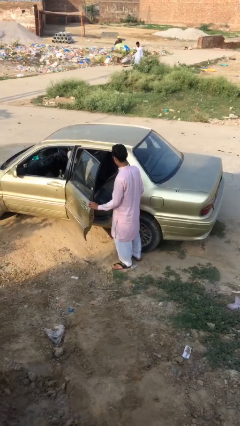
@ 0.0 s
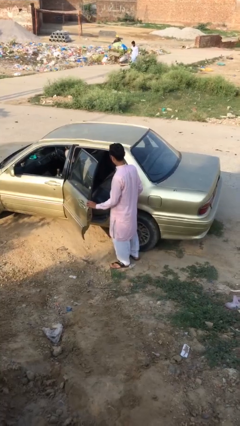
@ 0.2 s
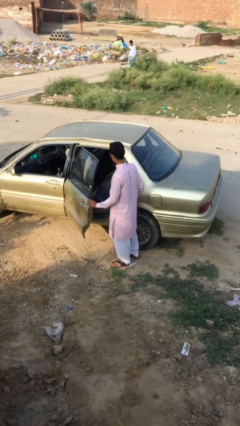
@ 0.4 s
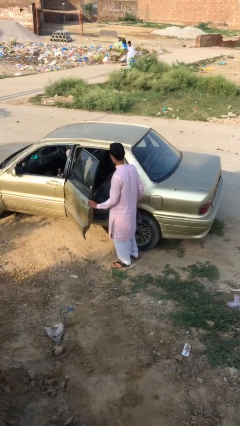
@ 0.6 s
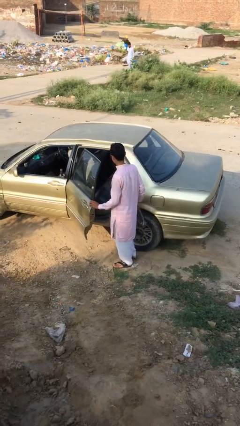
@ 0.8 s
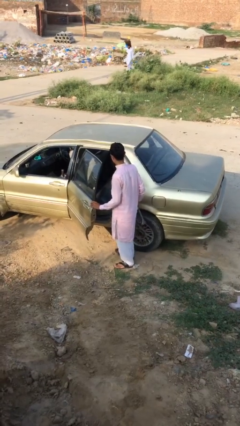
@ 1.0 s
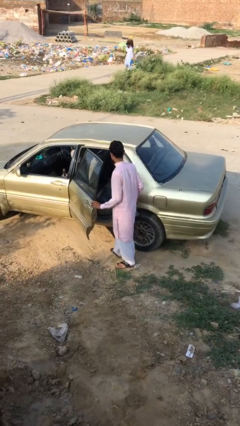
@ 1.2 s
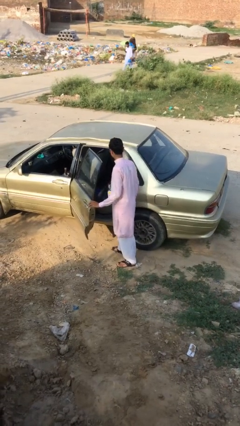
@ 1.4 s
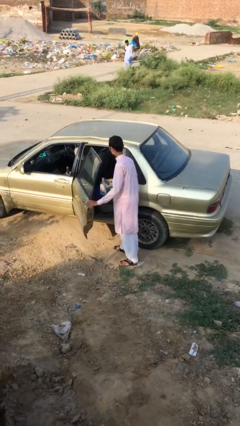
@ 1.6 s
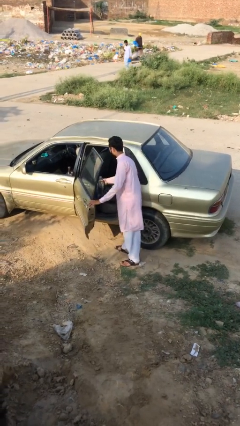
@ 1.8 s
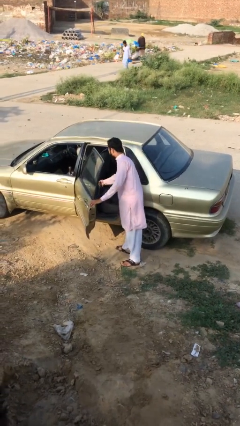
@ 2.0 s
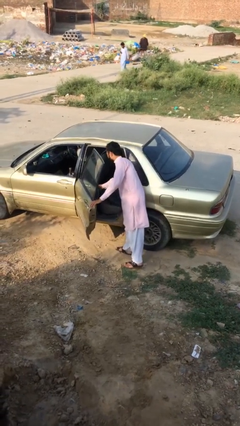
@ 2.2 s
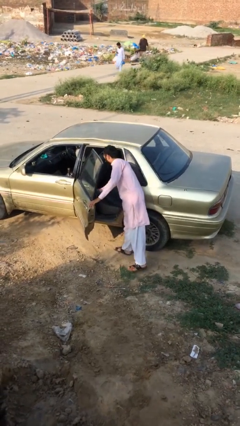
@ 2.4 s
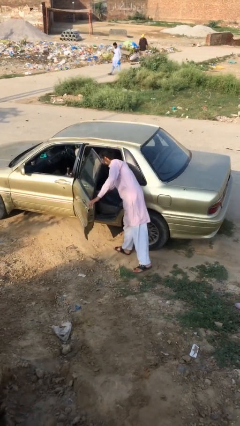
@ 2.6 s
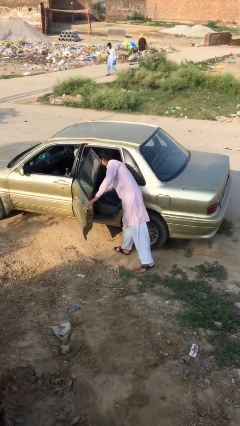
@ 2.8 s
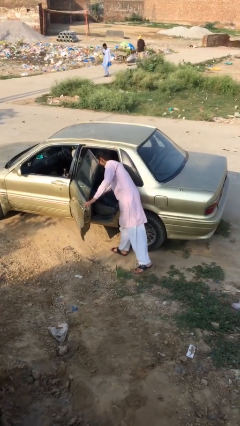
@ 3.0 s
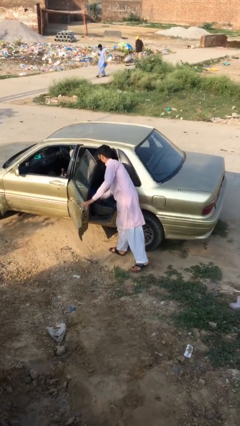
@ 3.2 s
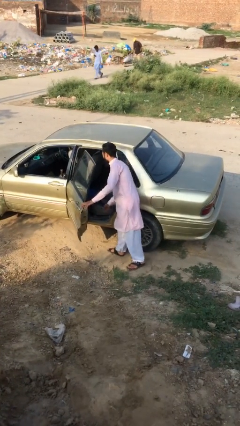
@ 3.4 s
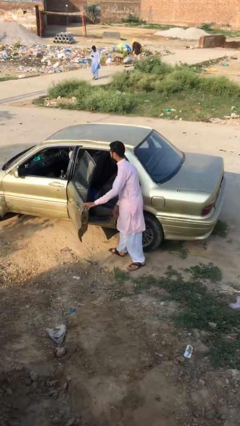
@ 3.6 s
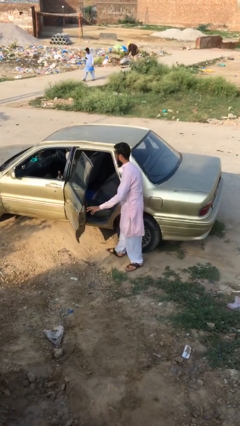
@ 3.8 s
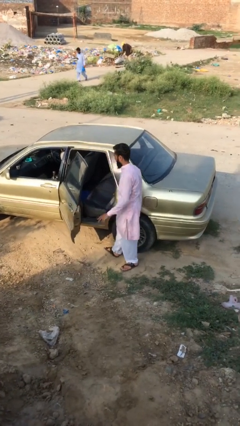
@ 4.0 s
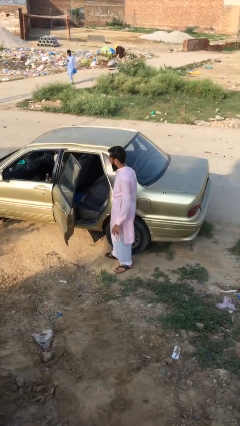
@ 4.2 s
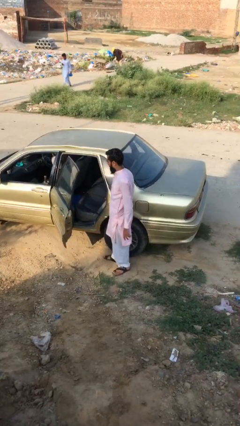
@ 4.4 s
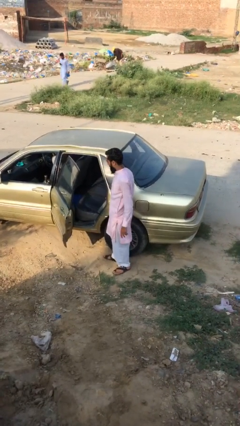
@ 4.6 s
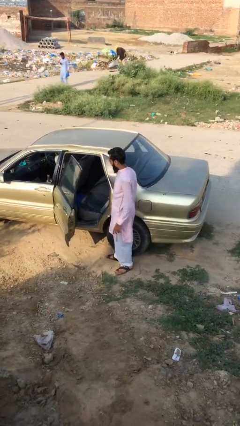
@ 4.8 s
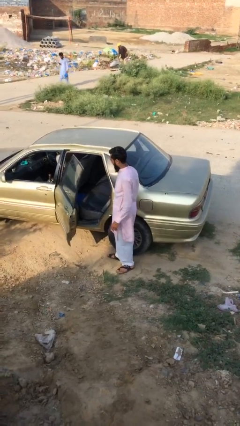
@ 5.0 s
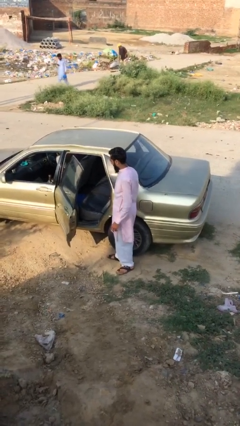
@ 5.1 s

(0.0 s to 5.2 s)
person loads car

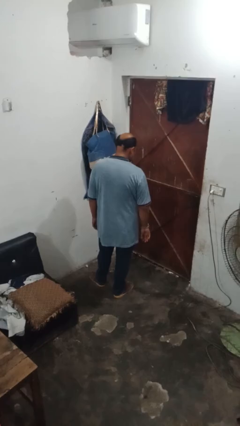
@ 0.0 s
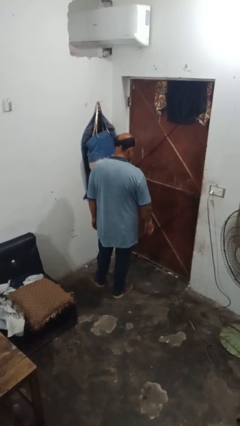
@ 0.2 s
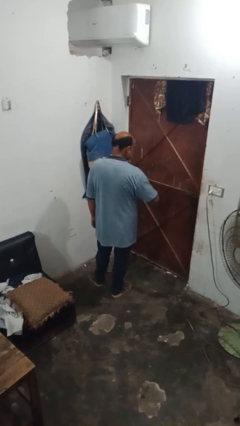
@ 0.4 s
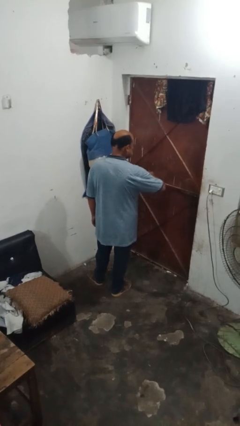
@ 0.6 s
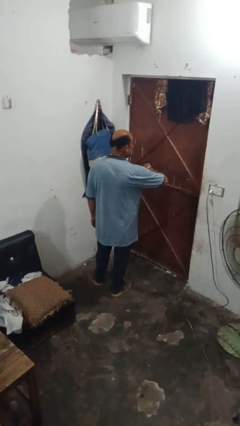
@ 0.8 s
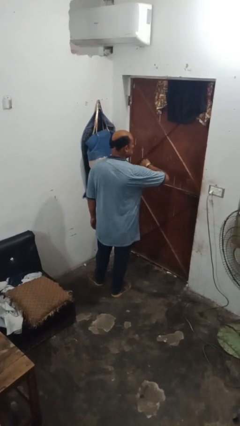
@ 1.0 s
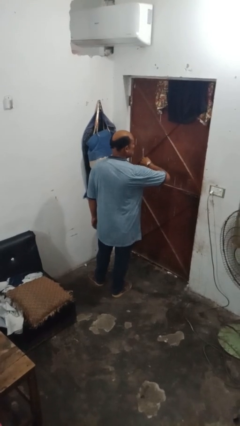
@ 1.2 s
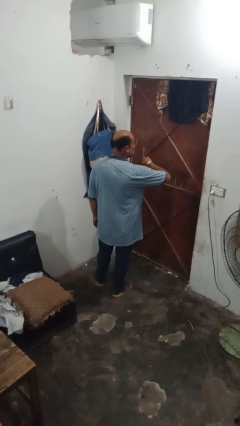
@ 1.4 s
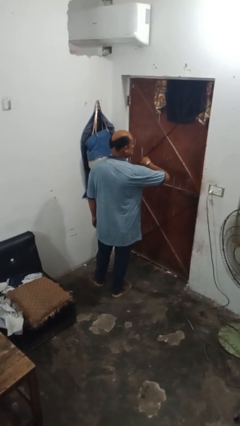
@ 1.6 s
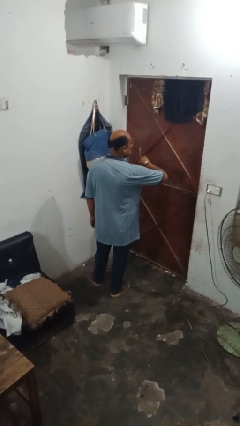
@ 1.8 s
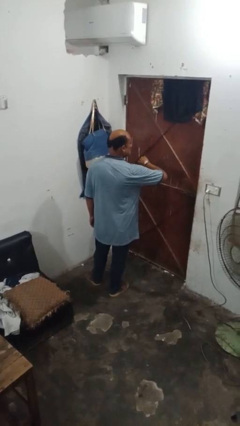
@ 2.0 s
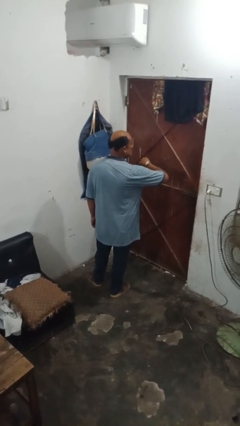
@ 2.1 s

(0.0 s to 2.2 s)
person looks at wristwatch

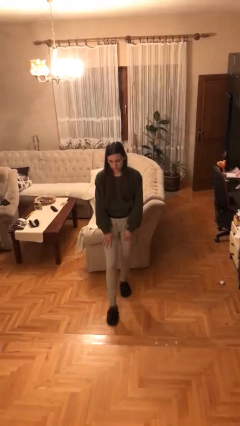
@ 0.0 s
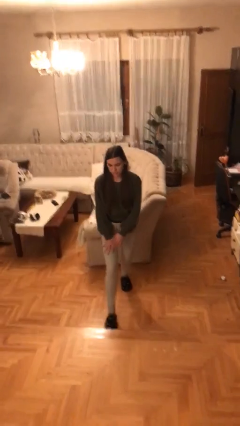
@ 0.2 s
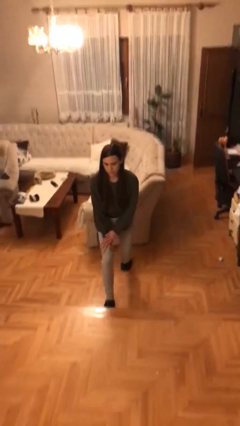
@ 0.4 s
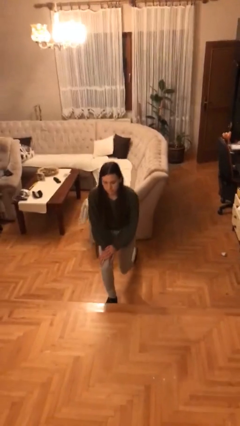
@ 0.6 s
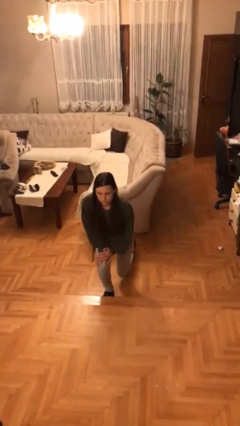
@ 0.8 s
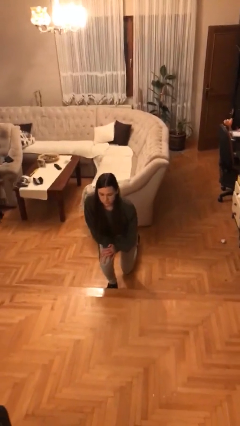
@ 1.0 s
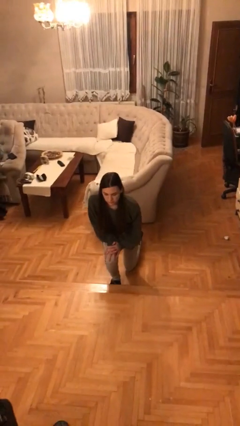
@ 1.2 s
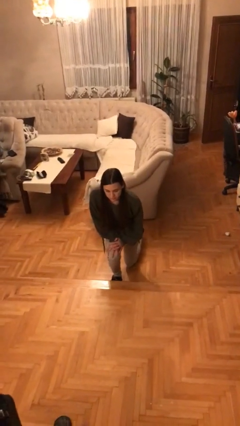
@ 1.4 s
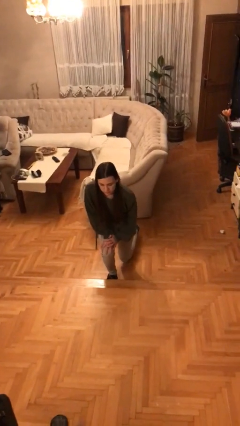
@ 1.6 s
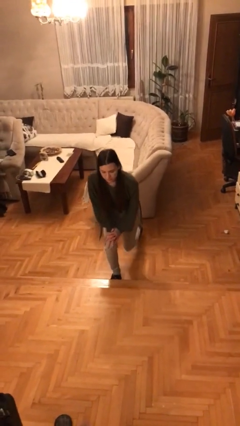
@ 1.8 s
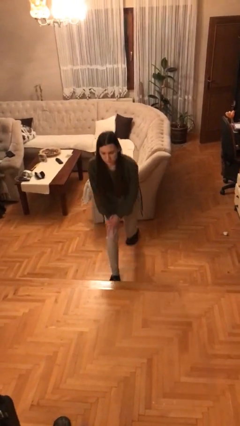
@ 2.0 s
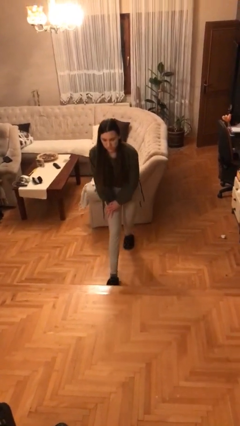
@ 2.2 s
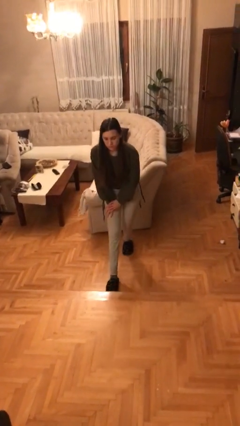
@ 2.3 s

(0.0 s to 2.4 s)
person kneels

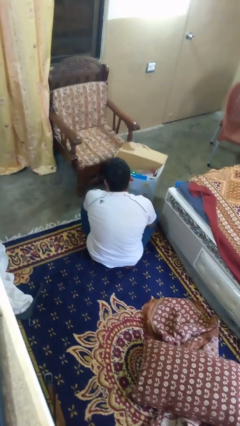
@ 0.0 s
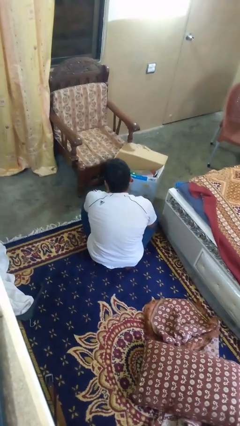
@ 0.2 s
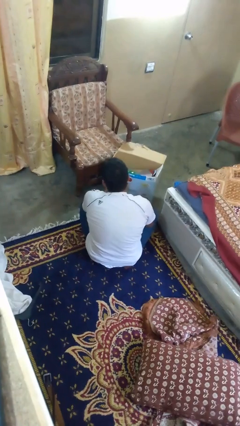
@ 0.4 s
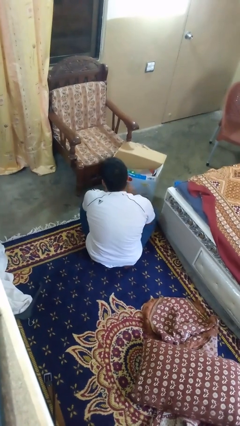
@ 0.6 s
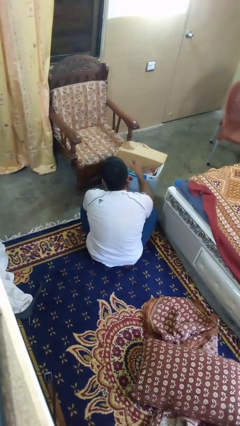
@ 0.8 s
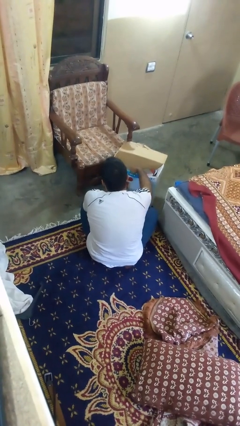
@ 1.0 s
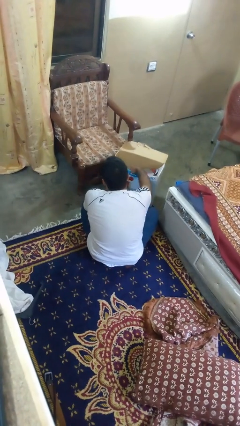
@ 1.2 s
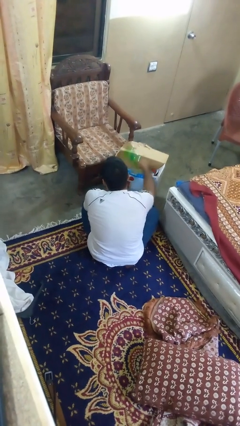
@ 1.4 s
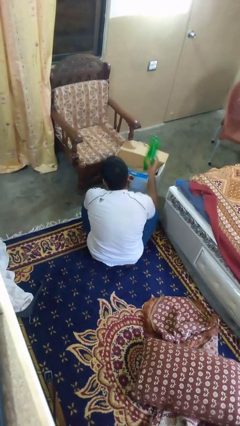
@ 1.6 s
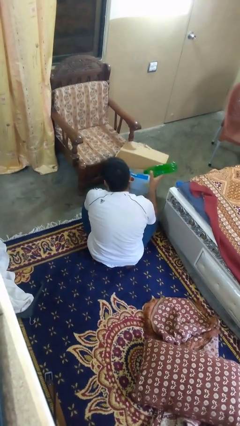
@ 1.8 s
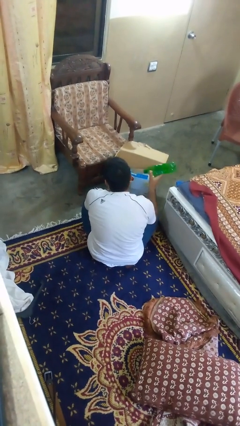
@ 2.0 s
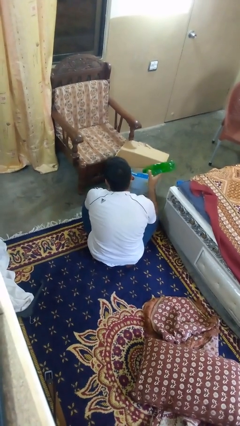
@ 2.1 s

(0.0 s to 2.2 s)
person takes object from box

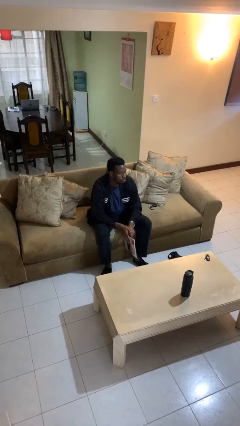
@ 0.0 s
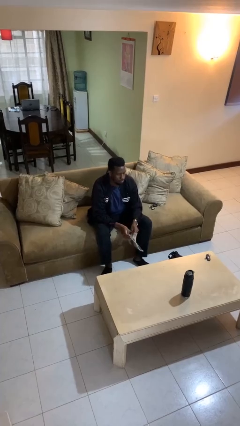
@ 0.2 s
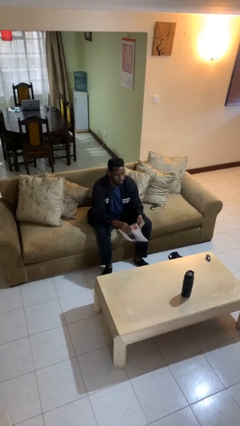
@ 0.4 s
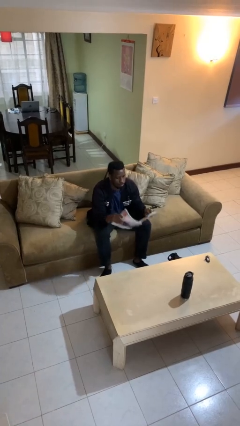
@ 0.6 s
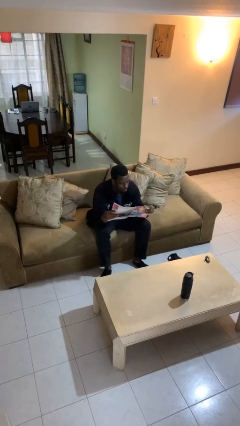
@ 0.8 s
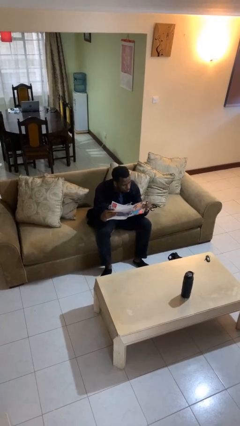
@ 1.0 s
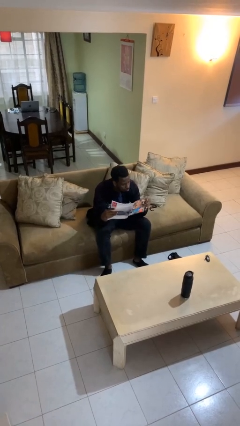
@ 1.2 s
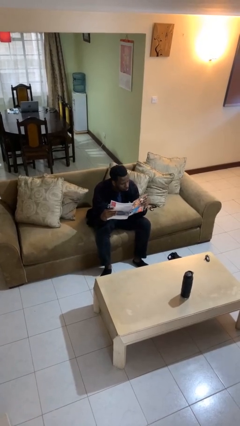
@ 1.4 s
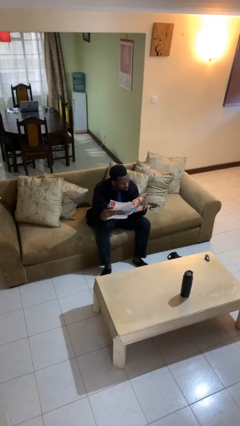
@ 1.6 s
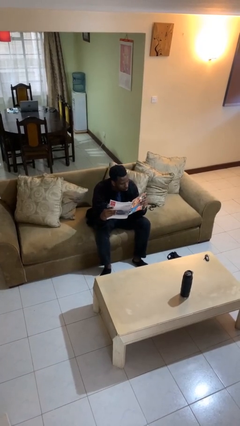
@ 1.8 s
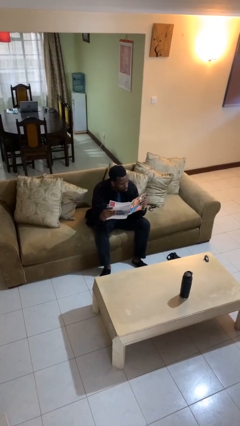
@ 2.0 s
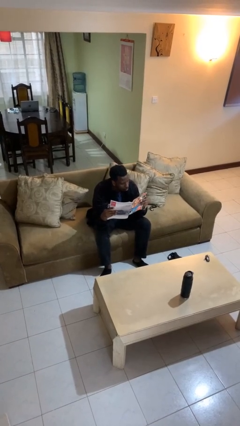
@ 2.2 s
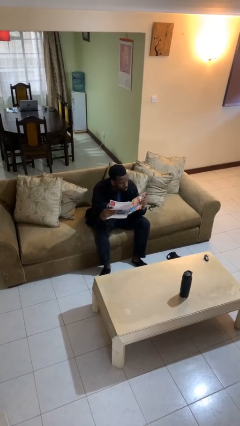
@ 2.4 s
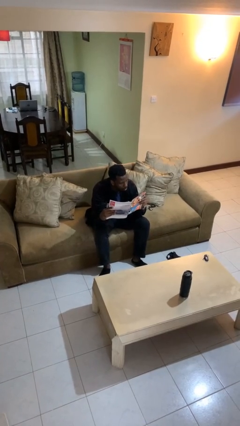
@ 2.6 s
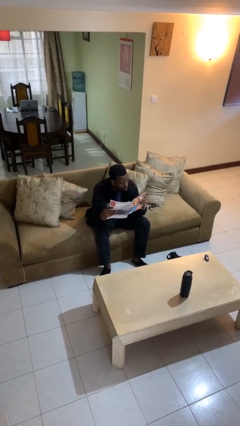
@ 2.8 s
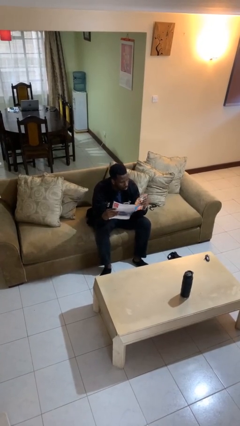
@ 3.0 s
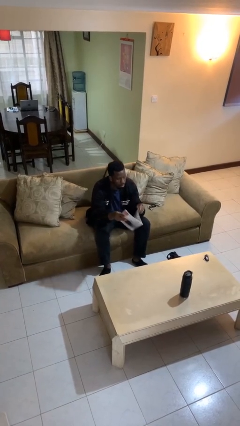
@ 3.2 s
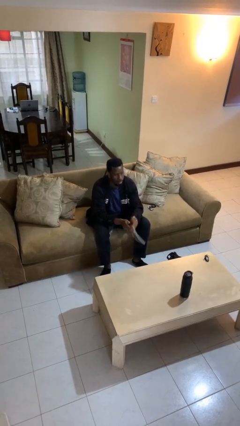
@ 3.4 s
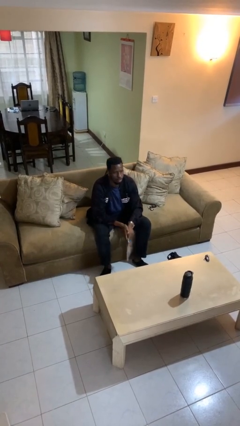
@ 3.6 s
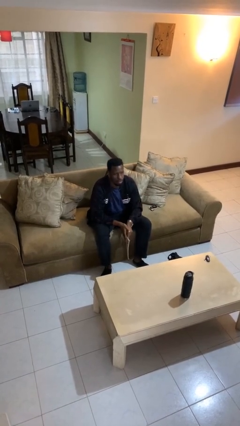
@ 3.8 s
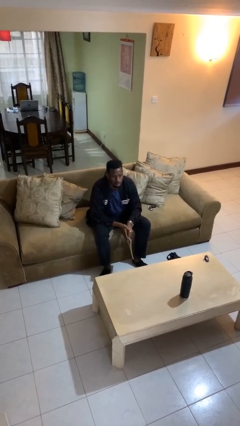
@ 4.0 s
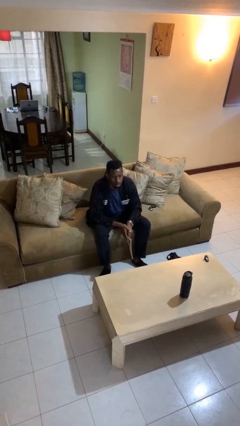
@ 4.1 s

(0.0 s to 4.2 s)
person reads magazine

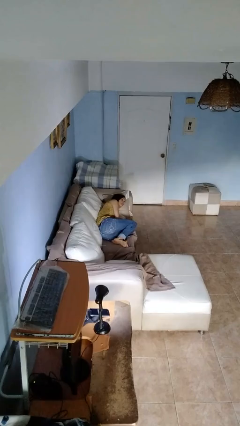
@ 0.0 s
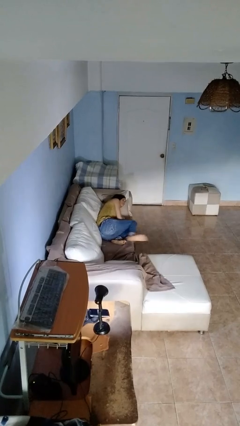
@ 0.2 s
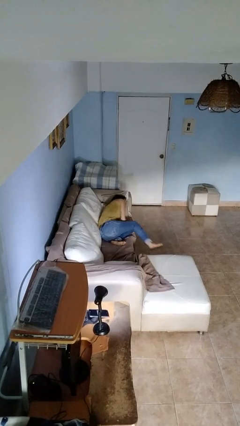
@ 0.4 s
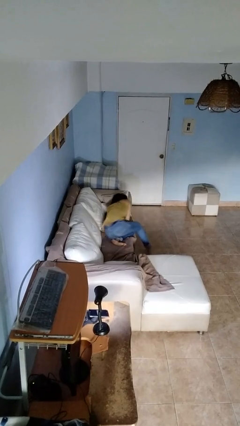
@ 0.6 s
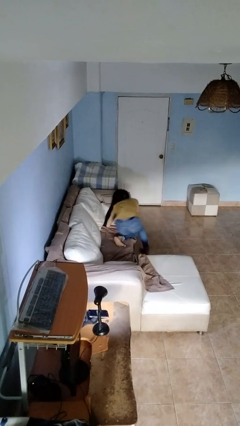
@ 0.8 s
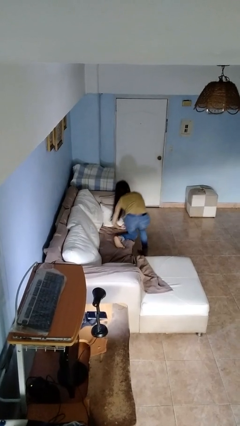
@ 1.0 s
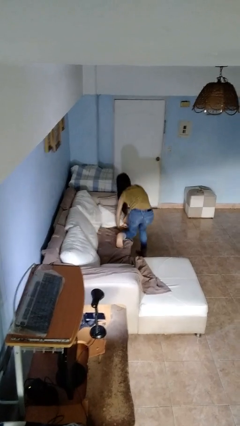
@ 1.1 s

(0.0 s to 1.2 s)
person stands up
